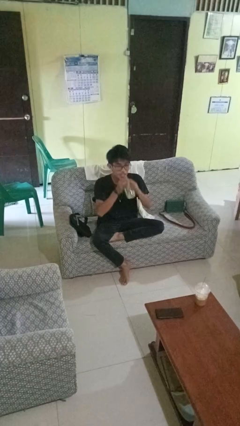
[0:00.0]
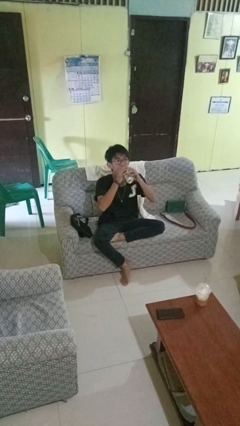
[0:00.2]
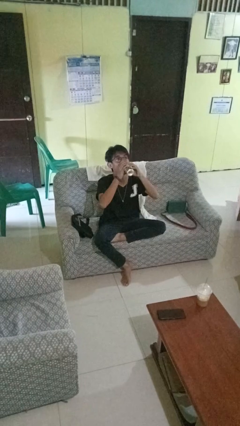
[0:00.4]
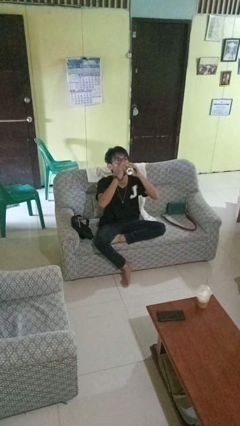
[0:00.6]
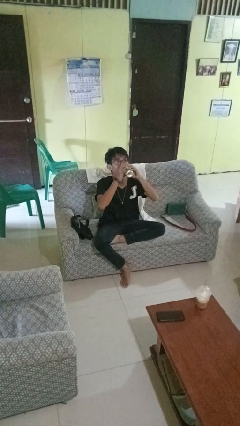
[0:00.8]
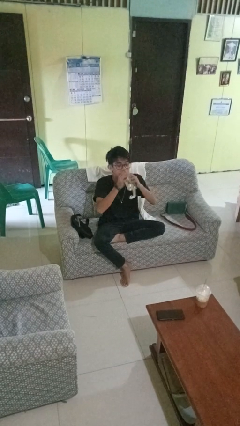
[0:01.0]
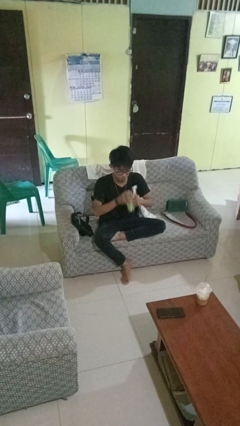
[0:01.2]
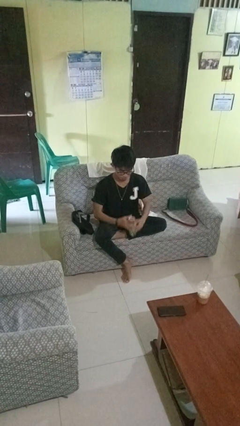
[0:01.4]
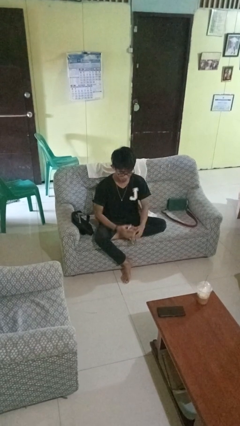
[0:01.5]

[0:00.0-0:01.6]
person drinks from beverage can

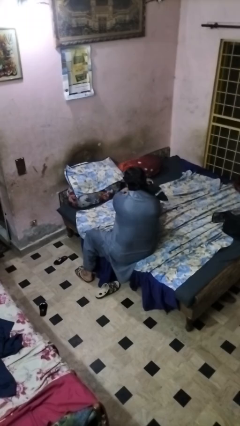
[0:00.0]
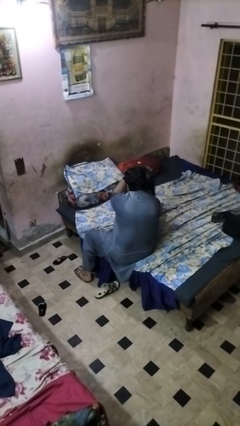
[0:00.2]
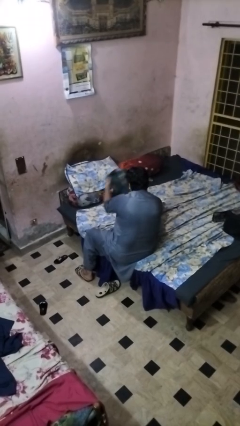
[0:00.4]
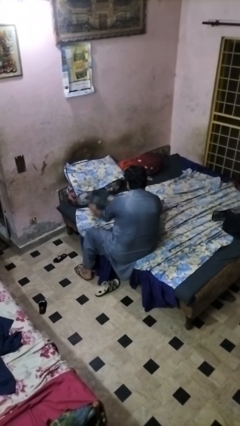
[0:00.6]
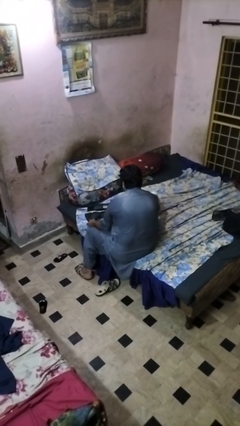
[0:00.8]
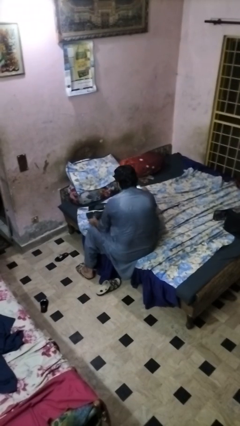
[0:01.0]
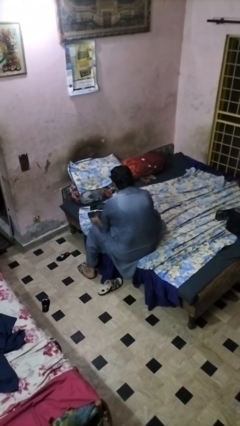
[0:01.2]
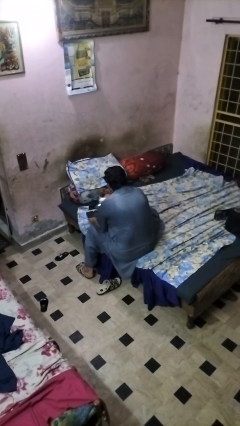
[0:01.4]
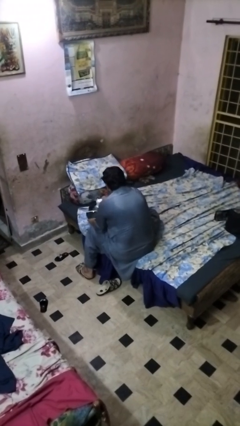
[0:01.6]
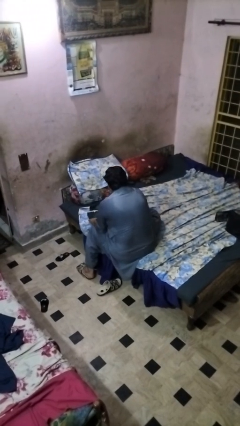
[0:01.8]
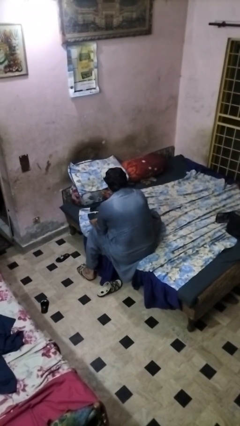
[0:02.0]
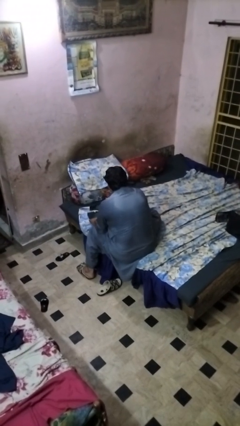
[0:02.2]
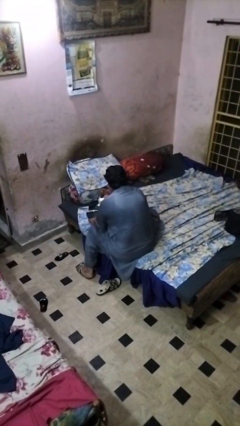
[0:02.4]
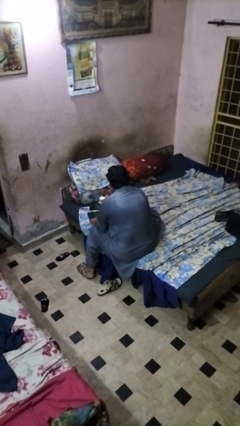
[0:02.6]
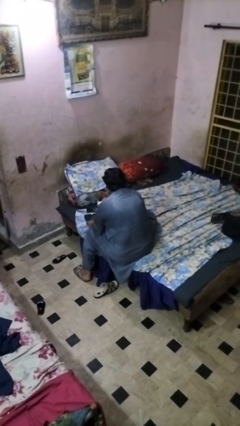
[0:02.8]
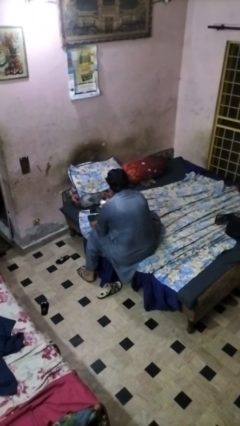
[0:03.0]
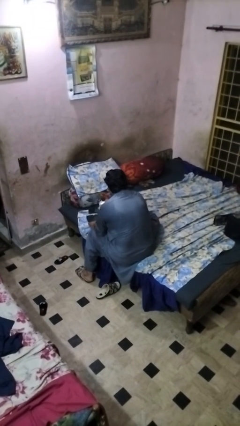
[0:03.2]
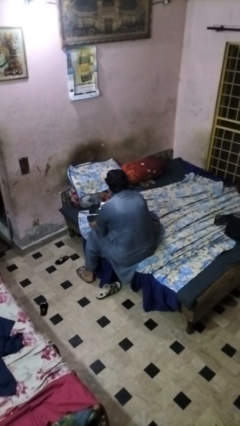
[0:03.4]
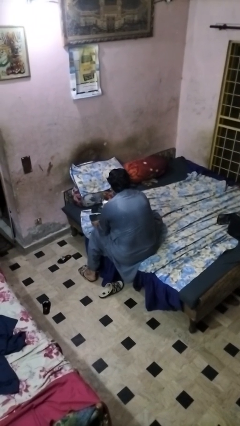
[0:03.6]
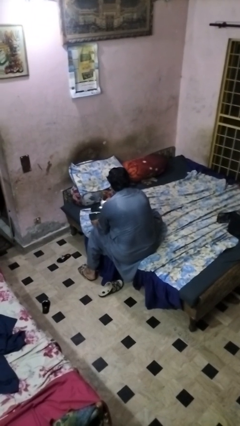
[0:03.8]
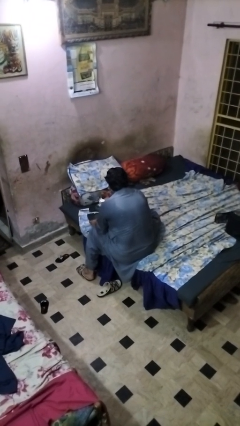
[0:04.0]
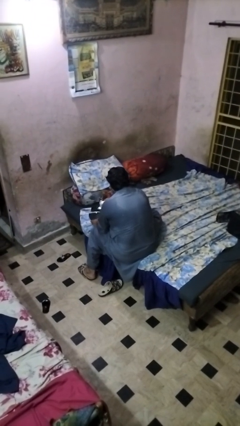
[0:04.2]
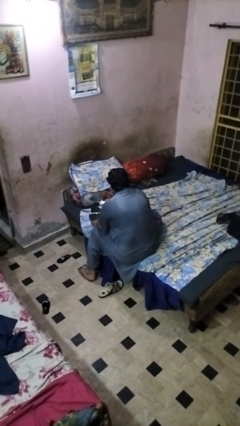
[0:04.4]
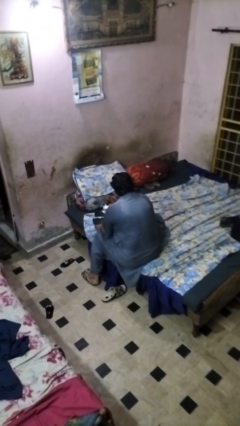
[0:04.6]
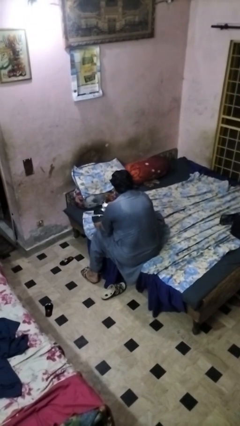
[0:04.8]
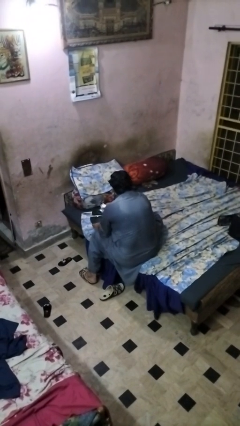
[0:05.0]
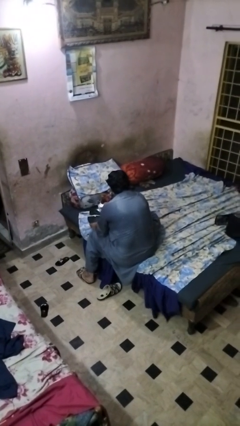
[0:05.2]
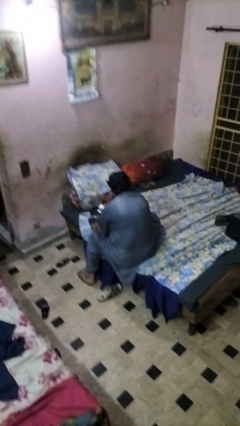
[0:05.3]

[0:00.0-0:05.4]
person irons clothes

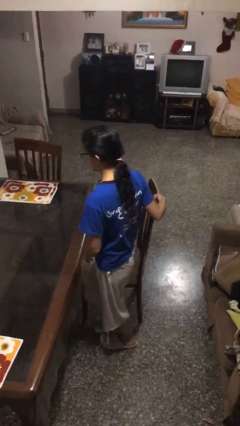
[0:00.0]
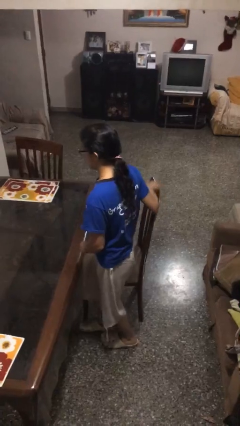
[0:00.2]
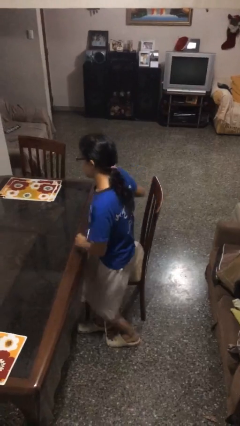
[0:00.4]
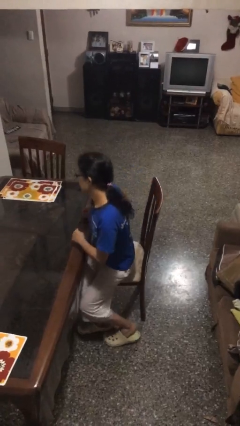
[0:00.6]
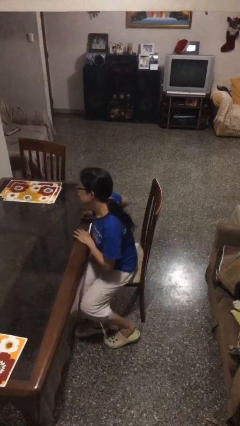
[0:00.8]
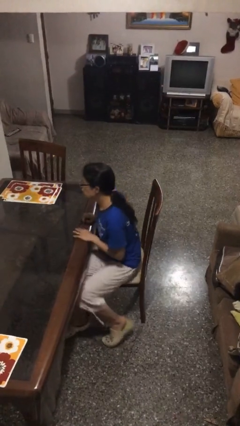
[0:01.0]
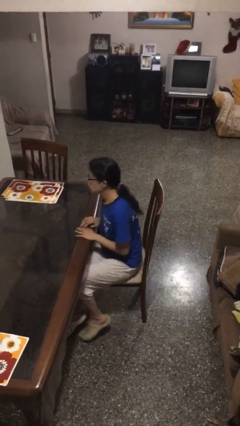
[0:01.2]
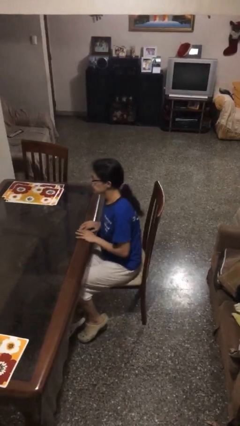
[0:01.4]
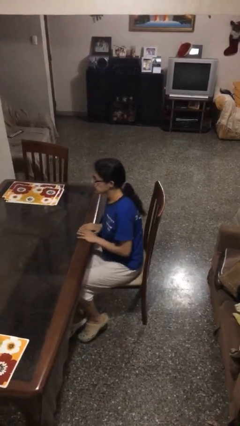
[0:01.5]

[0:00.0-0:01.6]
person sits down

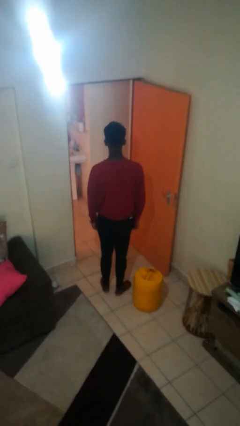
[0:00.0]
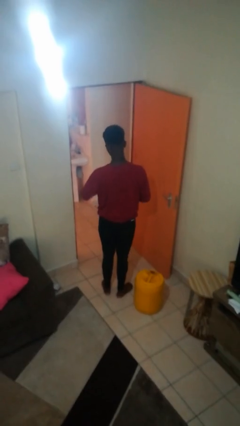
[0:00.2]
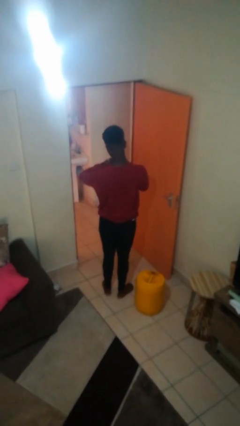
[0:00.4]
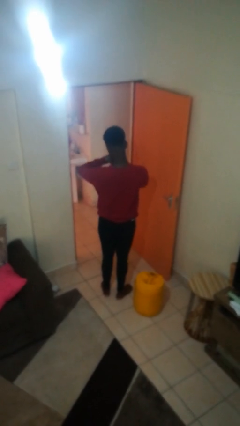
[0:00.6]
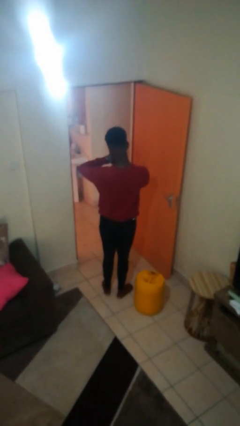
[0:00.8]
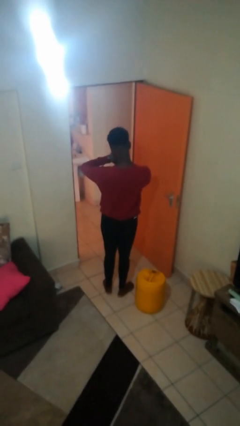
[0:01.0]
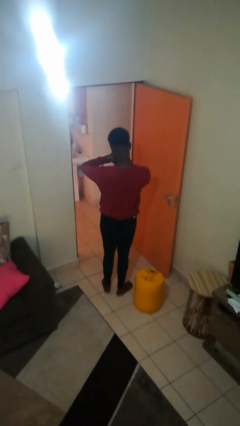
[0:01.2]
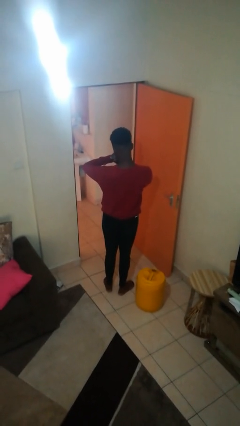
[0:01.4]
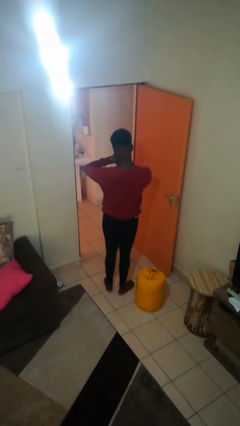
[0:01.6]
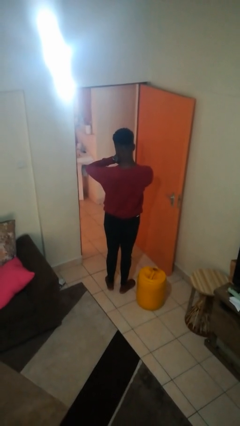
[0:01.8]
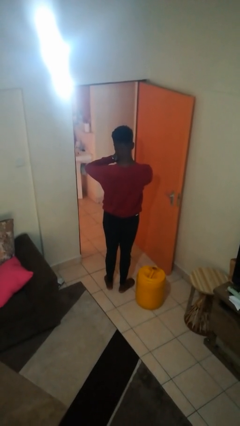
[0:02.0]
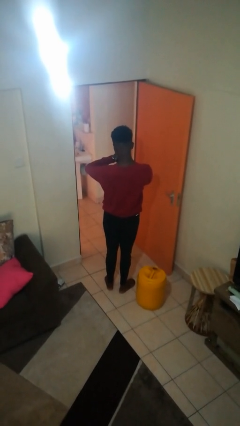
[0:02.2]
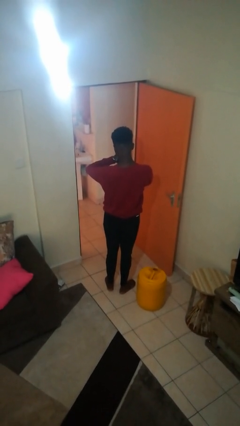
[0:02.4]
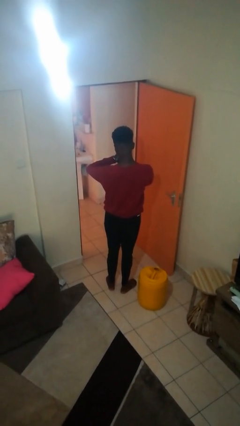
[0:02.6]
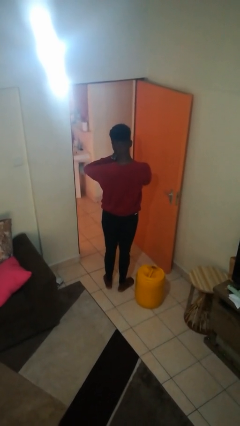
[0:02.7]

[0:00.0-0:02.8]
person looks at wristwatch

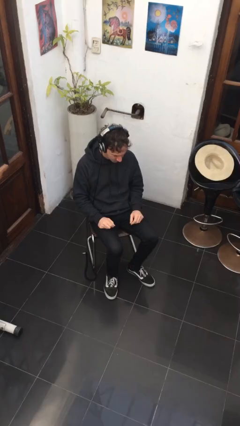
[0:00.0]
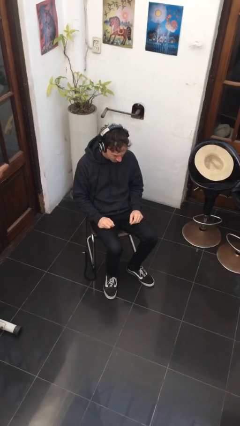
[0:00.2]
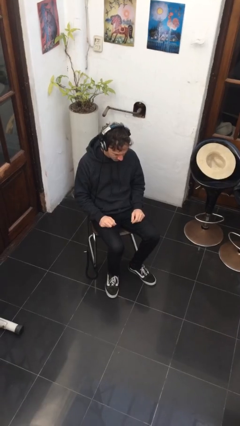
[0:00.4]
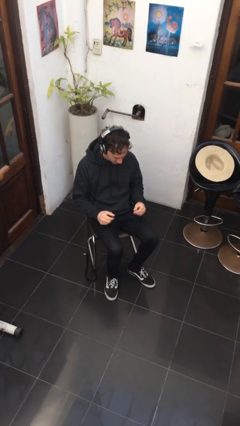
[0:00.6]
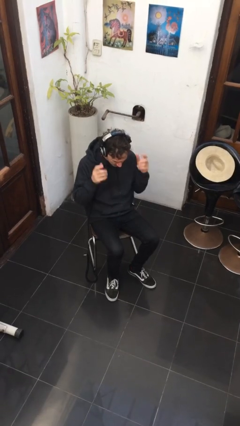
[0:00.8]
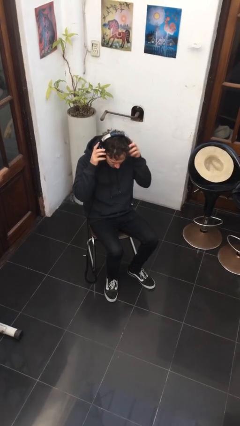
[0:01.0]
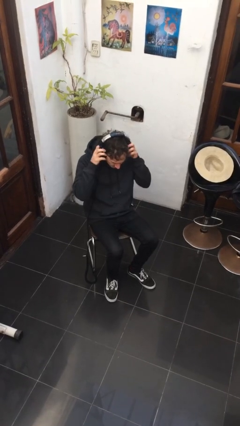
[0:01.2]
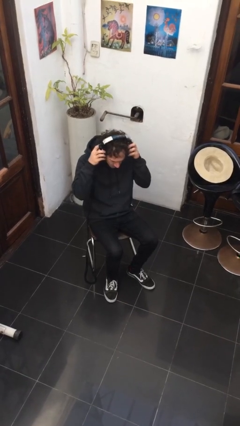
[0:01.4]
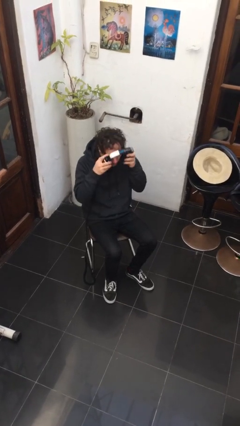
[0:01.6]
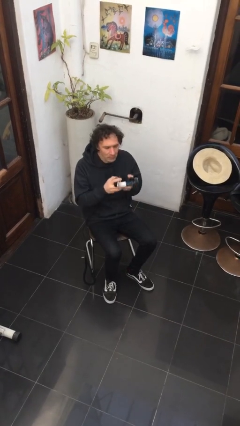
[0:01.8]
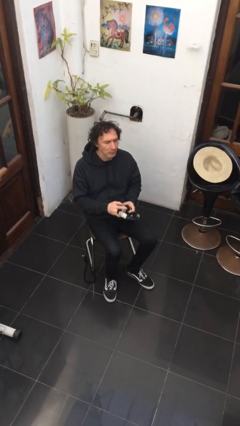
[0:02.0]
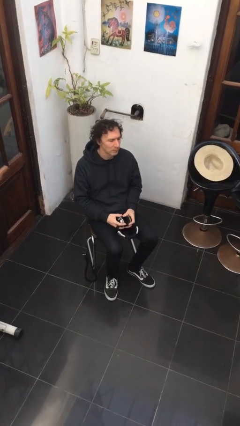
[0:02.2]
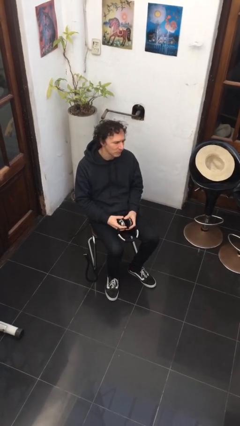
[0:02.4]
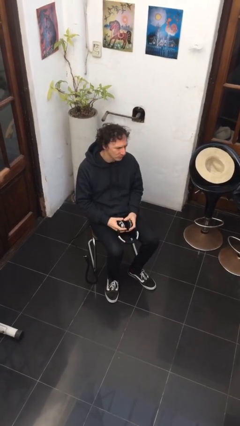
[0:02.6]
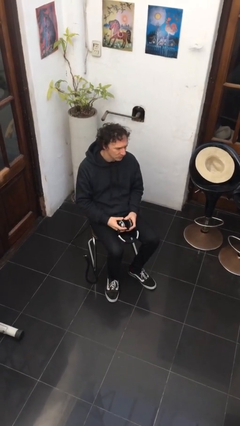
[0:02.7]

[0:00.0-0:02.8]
person takes off headphones

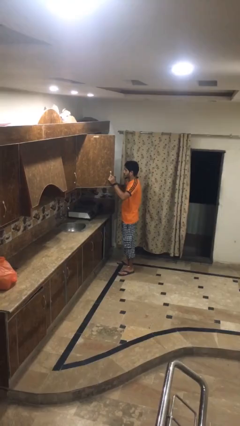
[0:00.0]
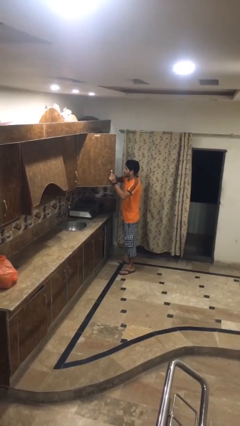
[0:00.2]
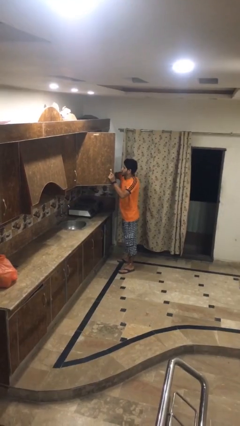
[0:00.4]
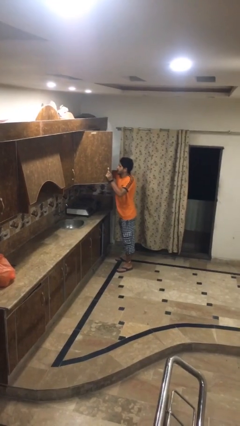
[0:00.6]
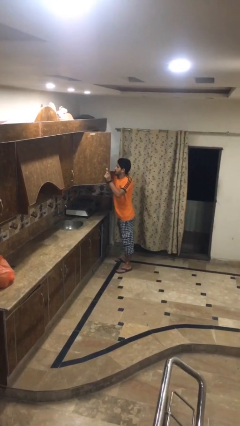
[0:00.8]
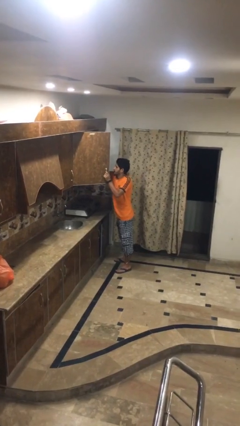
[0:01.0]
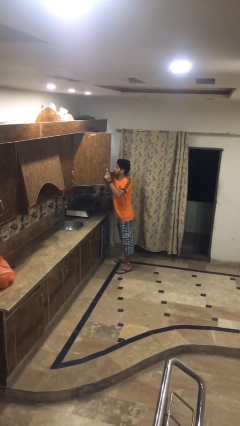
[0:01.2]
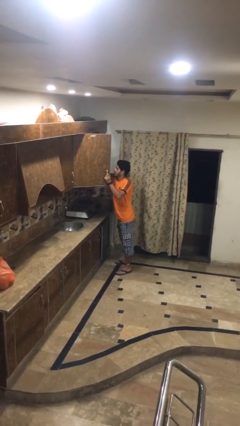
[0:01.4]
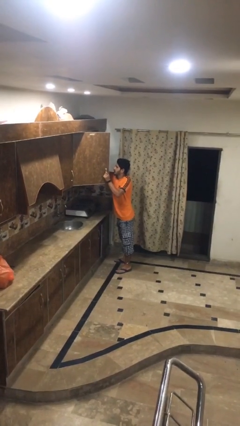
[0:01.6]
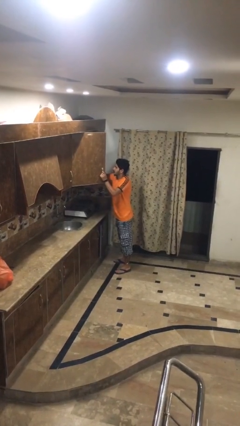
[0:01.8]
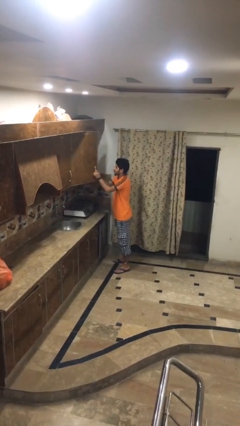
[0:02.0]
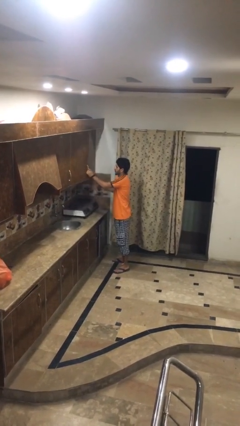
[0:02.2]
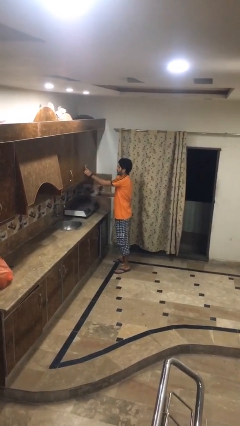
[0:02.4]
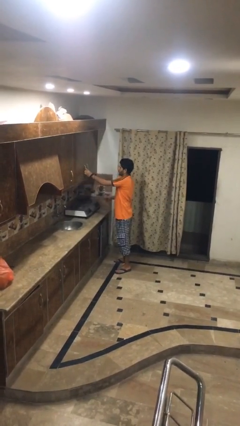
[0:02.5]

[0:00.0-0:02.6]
person puts object into kitchen drawer

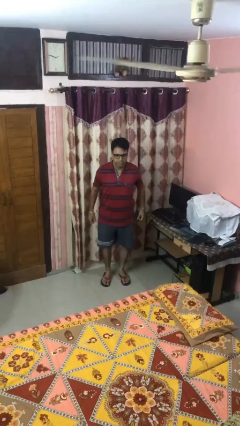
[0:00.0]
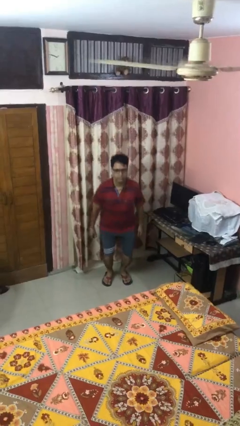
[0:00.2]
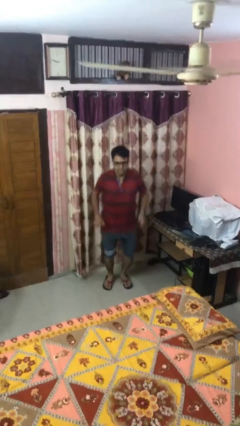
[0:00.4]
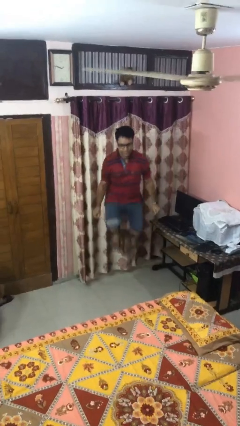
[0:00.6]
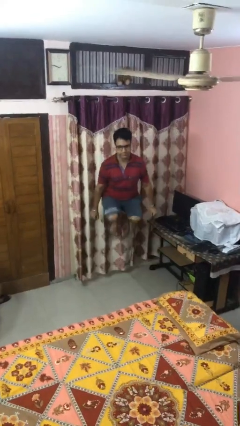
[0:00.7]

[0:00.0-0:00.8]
person jumps
